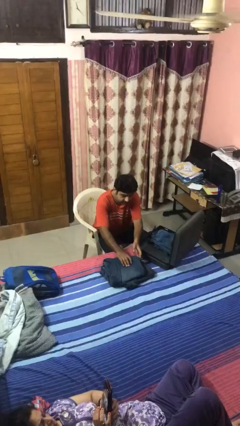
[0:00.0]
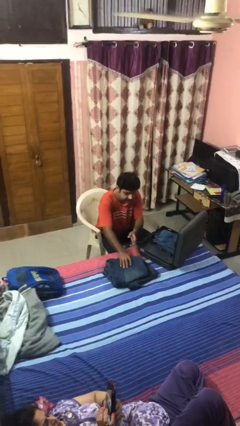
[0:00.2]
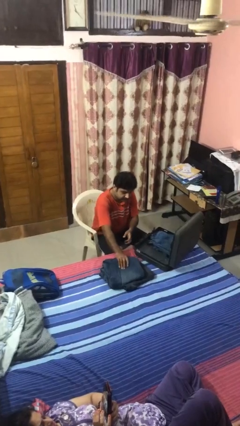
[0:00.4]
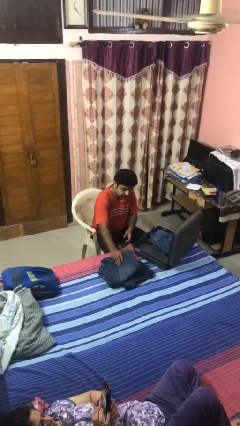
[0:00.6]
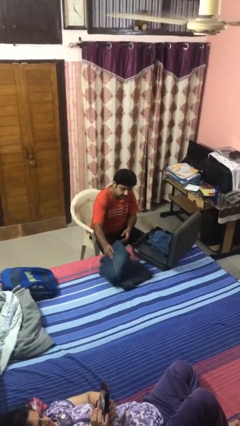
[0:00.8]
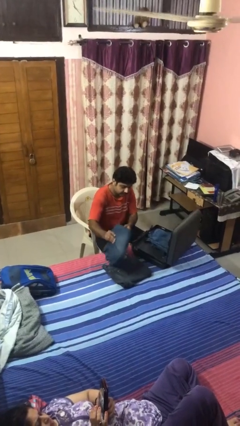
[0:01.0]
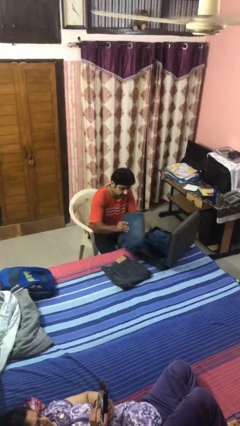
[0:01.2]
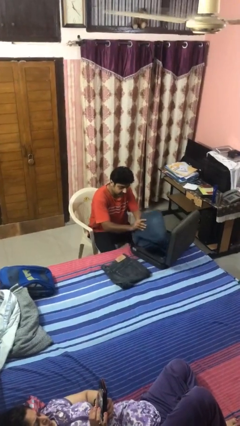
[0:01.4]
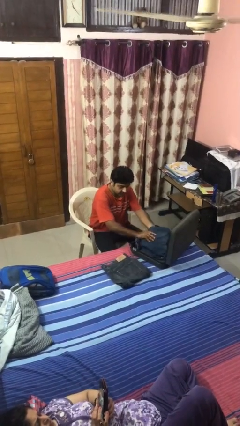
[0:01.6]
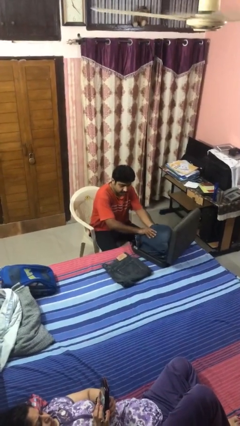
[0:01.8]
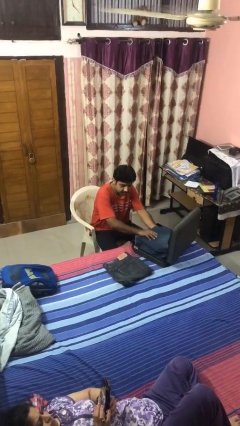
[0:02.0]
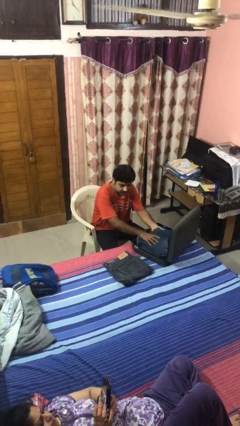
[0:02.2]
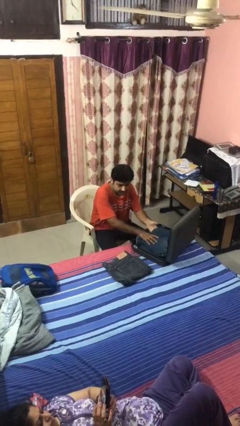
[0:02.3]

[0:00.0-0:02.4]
person loads clothes into suitcase

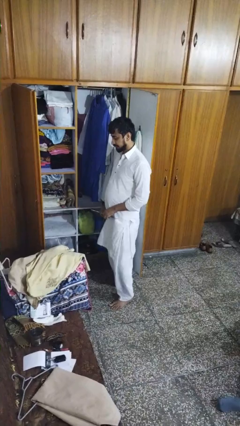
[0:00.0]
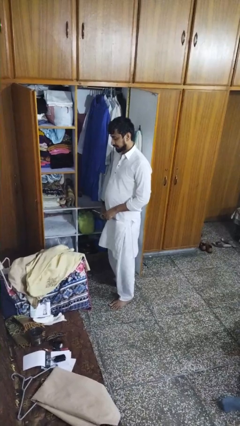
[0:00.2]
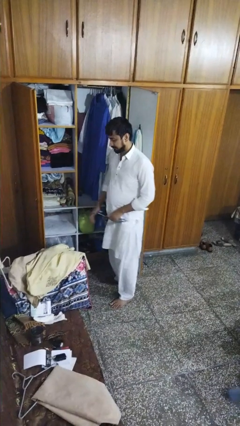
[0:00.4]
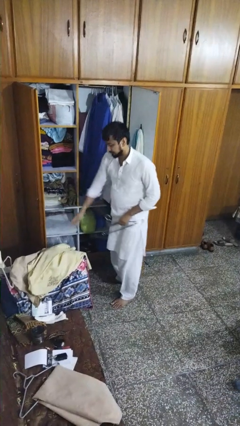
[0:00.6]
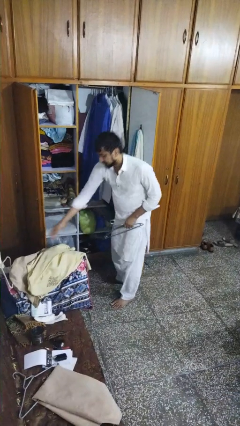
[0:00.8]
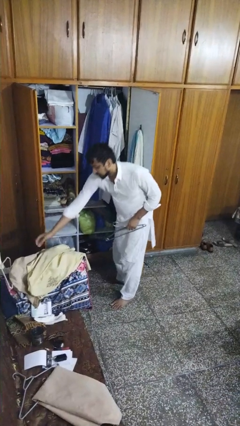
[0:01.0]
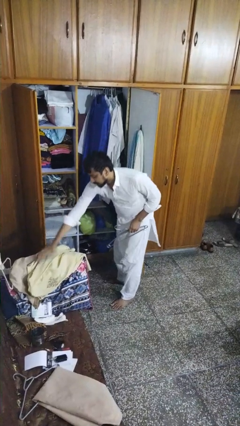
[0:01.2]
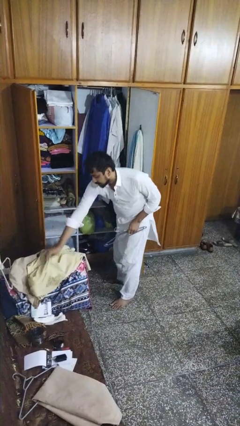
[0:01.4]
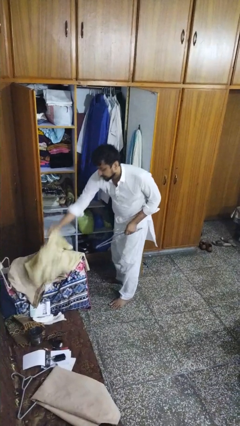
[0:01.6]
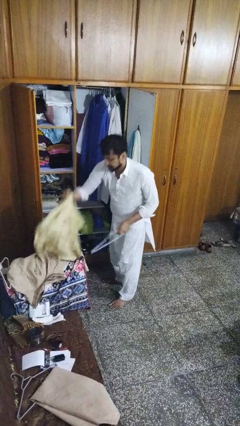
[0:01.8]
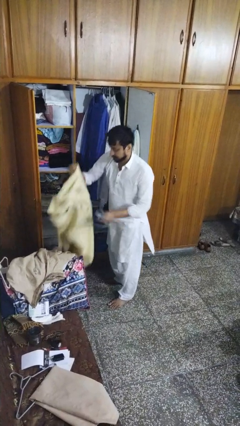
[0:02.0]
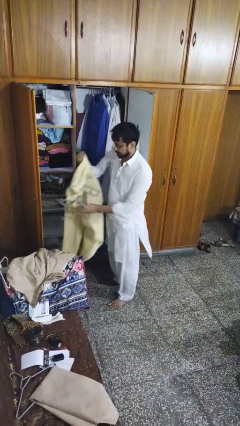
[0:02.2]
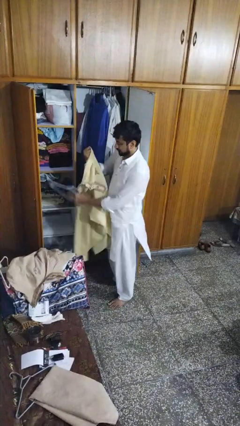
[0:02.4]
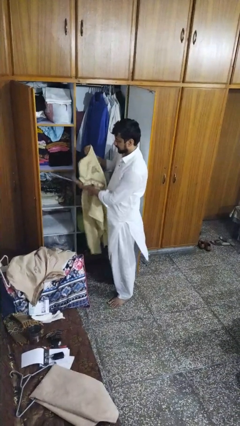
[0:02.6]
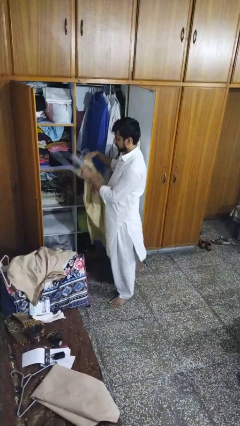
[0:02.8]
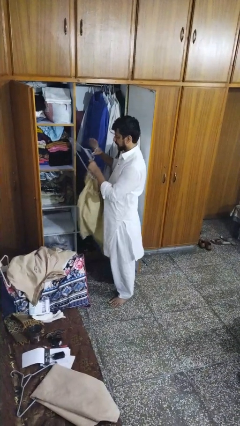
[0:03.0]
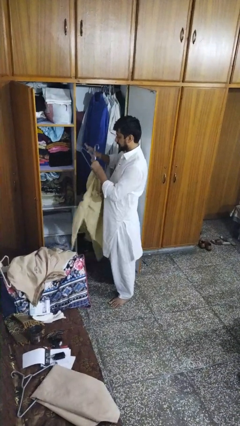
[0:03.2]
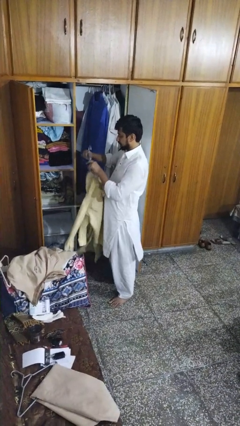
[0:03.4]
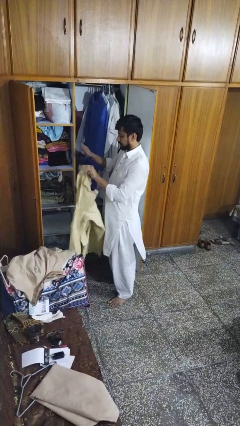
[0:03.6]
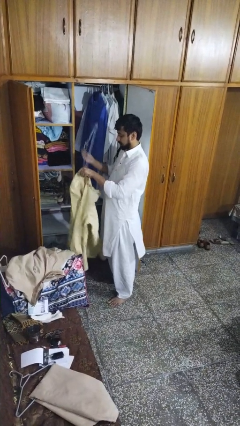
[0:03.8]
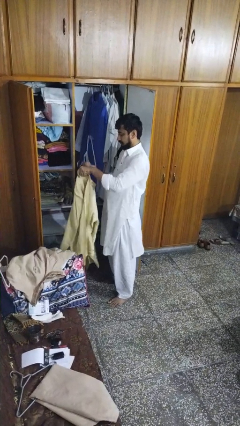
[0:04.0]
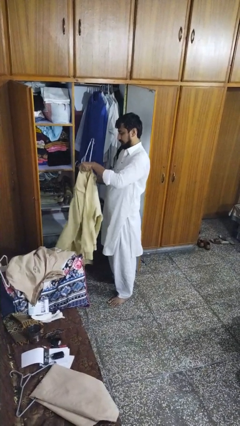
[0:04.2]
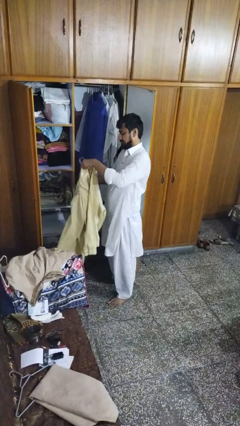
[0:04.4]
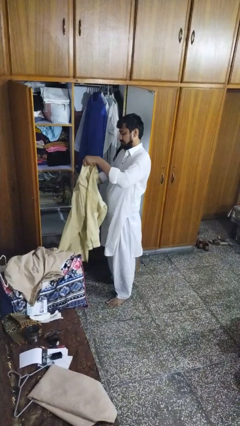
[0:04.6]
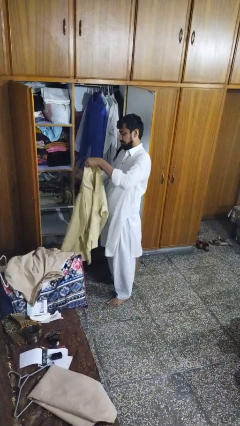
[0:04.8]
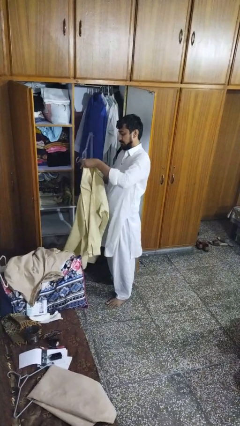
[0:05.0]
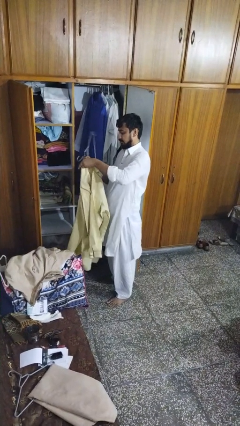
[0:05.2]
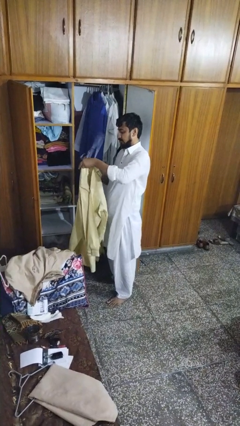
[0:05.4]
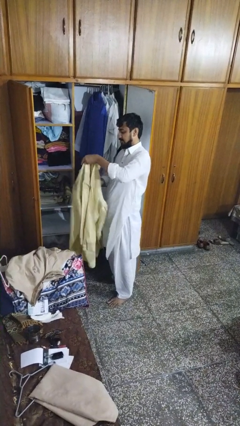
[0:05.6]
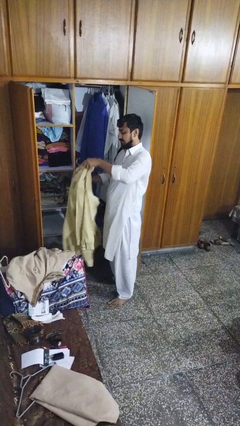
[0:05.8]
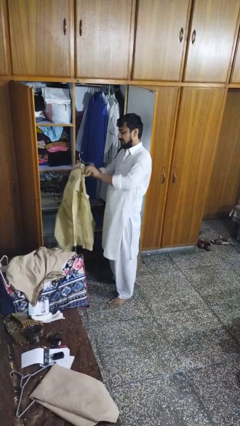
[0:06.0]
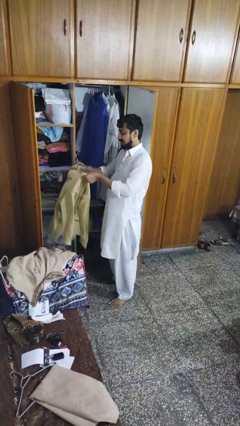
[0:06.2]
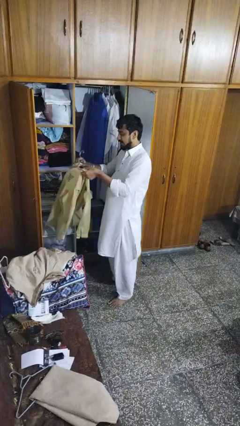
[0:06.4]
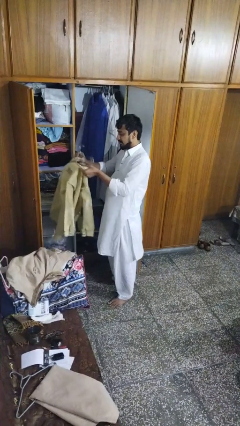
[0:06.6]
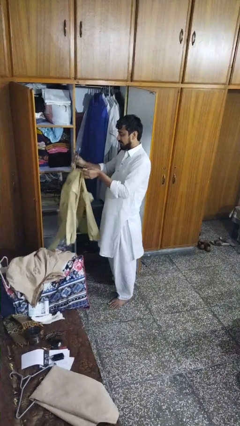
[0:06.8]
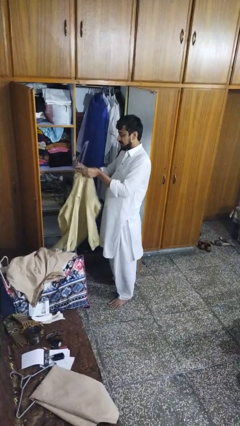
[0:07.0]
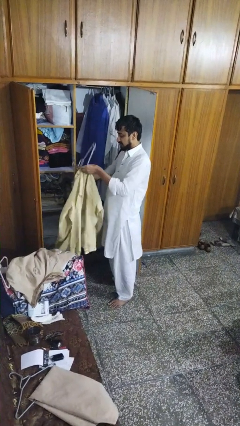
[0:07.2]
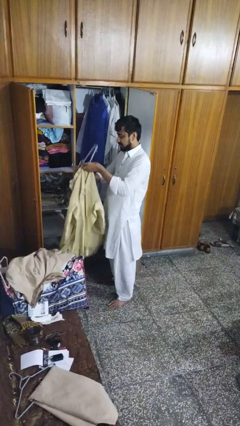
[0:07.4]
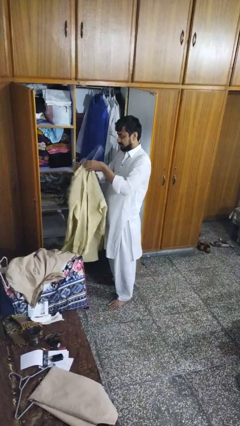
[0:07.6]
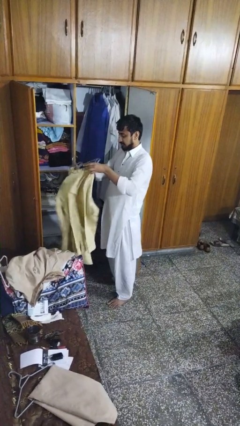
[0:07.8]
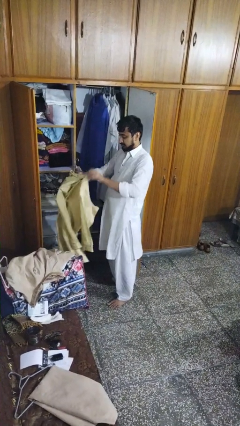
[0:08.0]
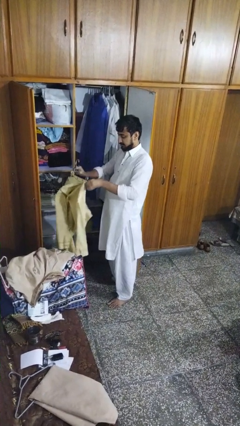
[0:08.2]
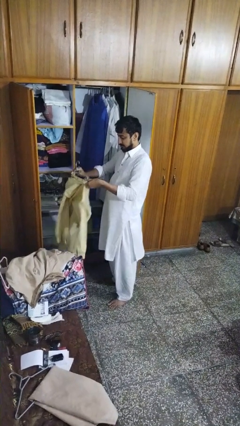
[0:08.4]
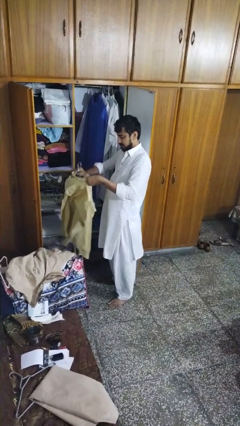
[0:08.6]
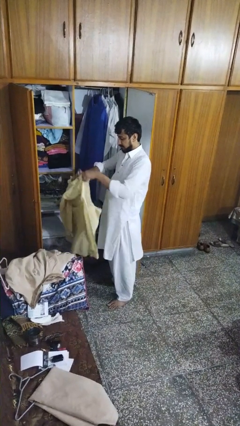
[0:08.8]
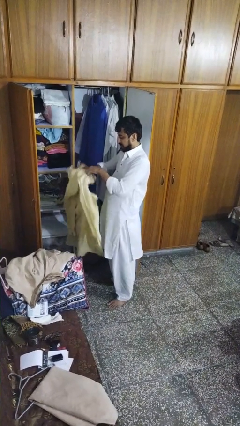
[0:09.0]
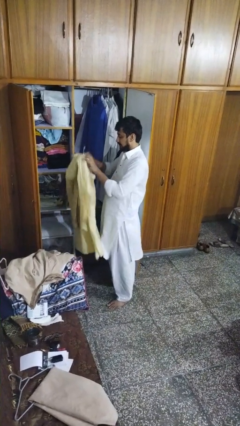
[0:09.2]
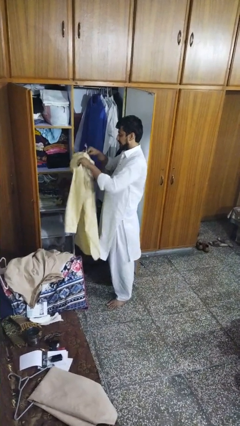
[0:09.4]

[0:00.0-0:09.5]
person puts clothes into closet

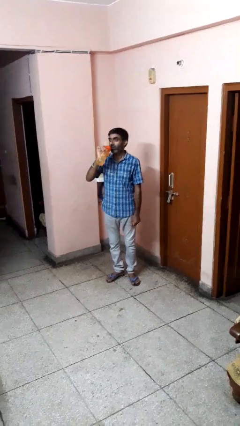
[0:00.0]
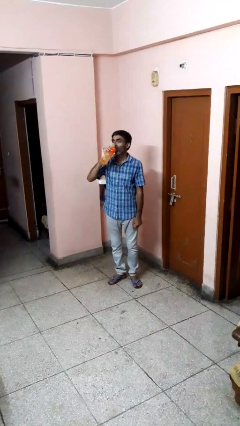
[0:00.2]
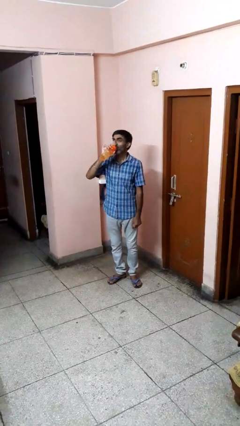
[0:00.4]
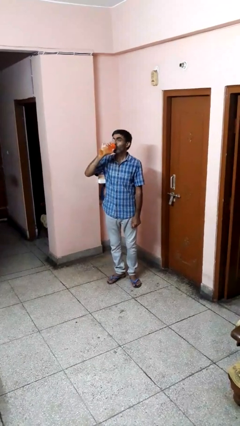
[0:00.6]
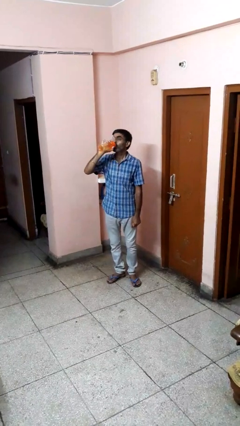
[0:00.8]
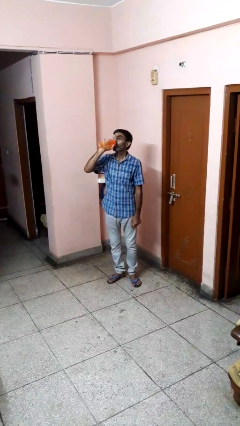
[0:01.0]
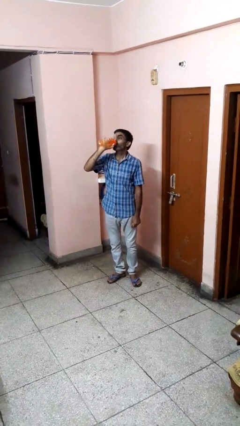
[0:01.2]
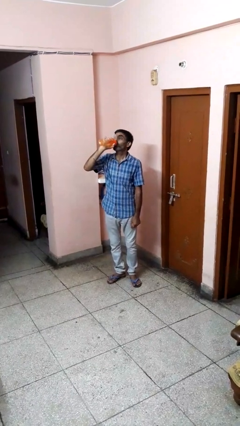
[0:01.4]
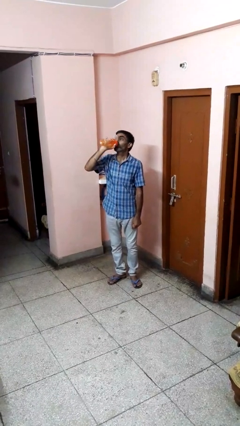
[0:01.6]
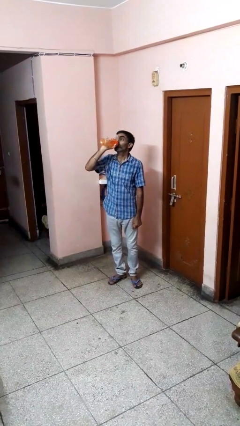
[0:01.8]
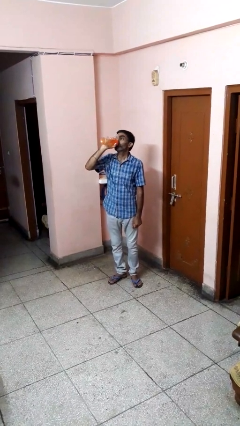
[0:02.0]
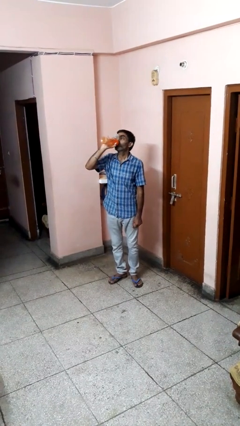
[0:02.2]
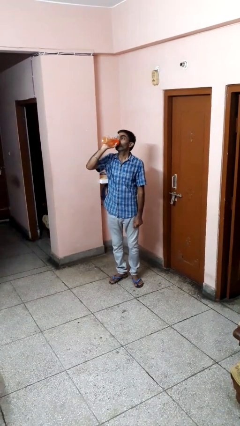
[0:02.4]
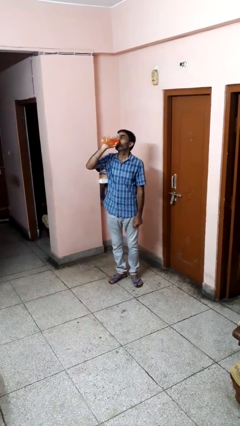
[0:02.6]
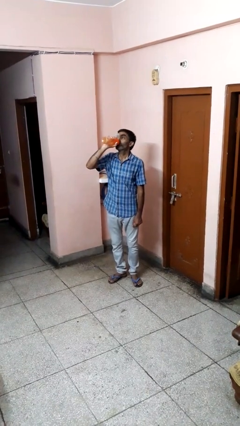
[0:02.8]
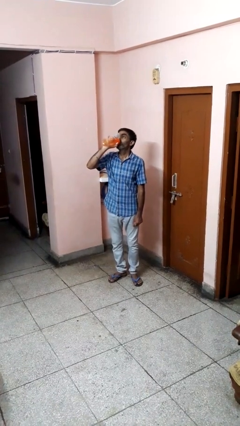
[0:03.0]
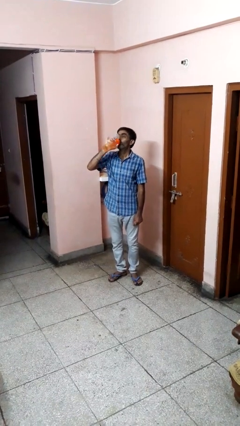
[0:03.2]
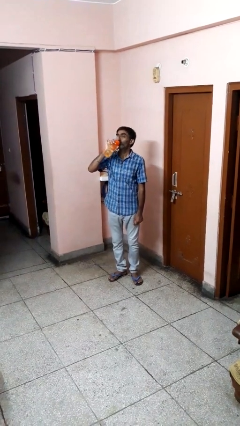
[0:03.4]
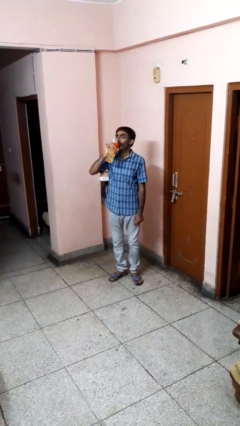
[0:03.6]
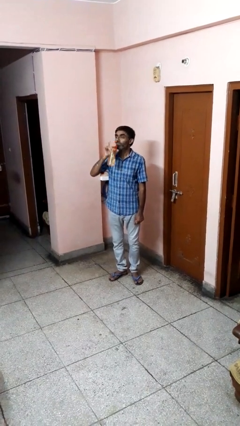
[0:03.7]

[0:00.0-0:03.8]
person drinks from bottle

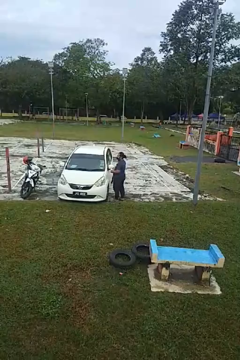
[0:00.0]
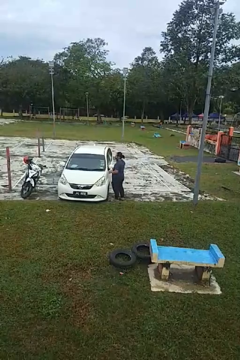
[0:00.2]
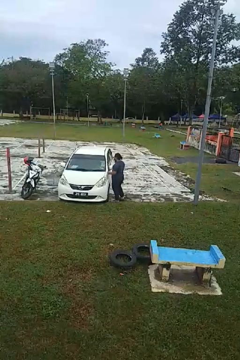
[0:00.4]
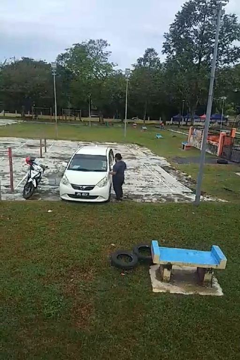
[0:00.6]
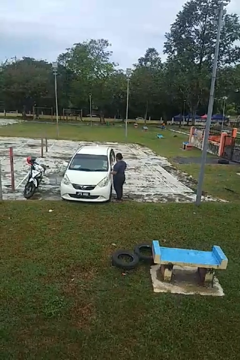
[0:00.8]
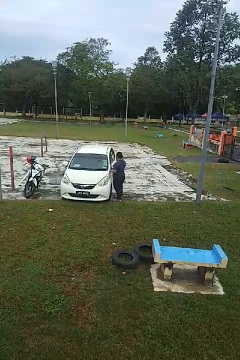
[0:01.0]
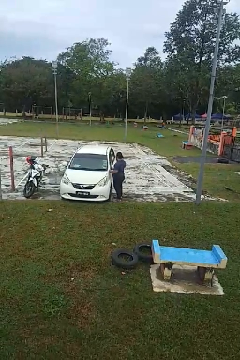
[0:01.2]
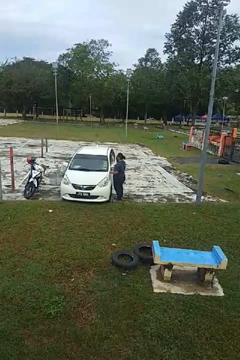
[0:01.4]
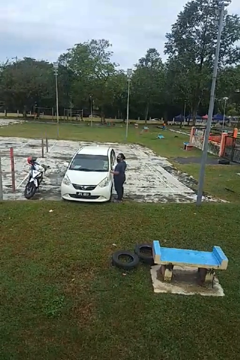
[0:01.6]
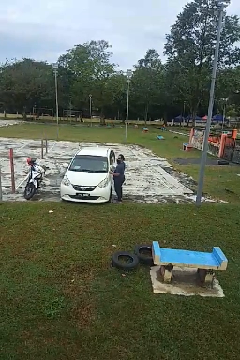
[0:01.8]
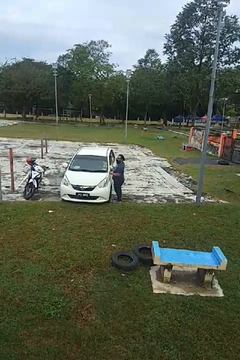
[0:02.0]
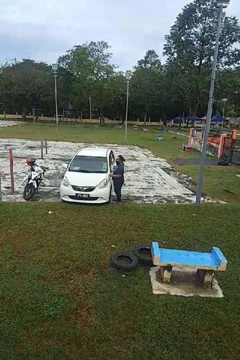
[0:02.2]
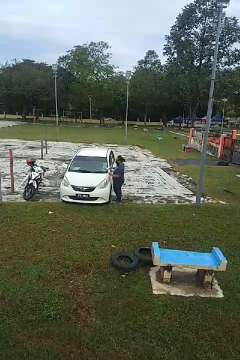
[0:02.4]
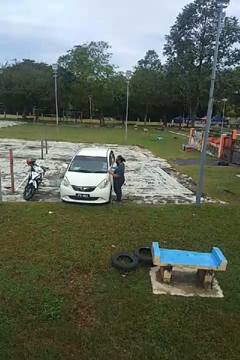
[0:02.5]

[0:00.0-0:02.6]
person polishes car with rag
